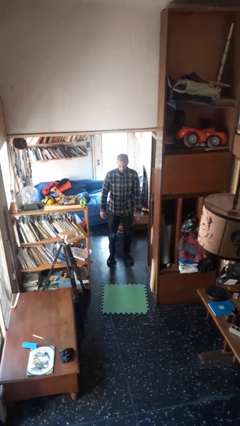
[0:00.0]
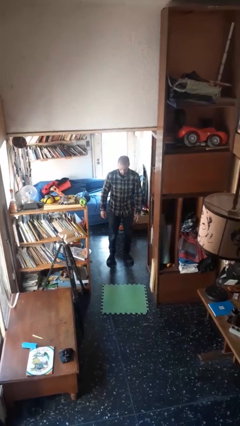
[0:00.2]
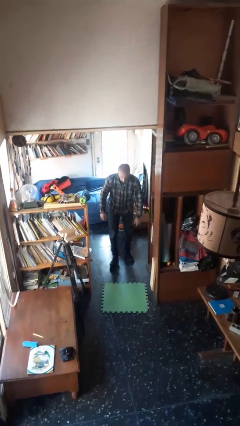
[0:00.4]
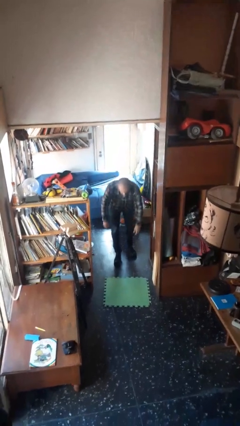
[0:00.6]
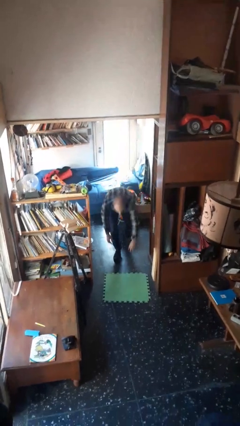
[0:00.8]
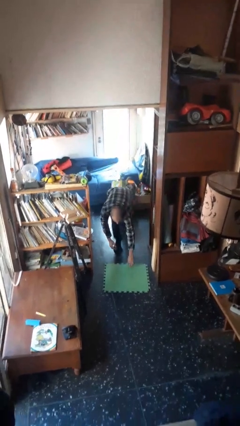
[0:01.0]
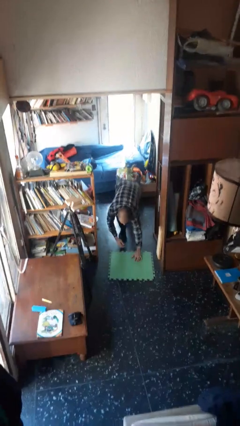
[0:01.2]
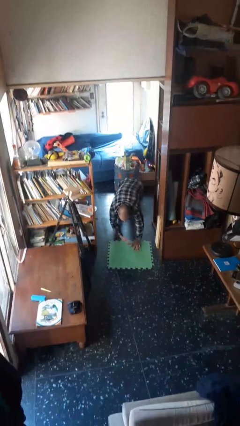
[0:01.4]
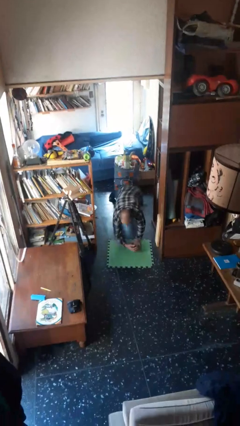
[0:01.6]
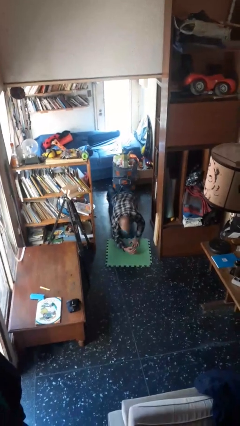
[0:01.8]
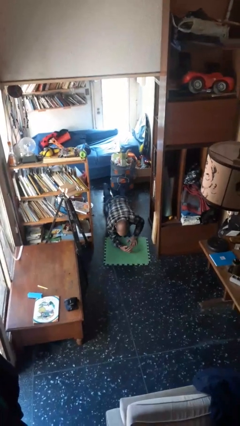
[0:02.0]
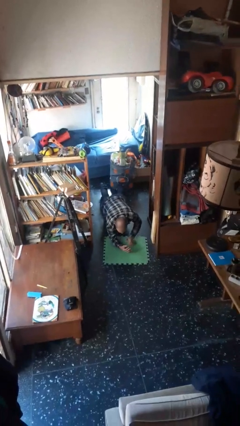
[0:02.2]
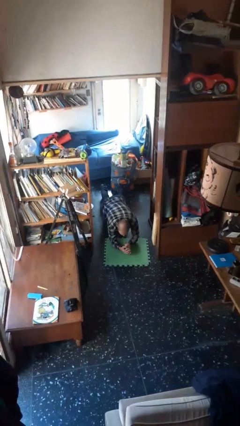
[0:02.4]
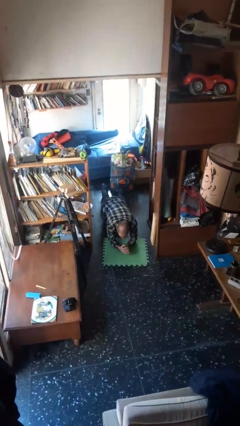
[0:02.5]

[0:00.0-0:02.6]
person exercises with plank

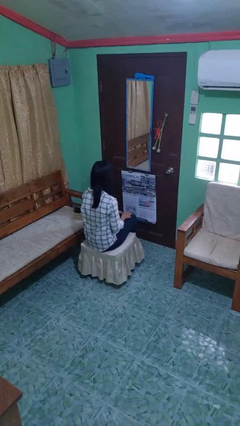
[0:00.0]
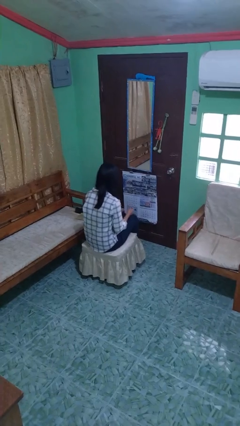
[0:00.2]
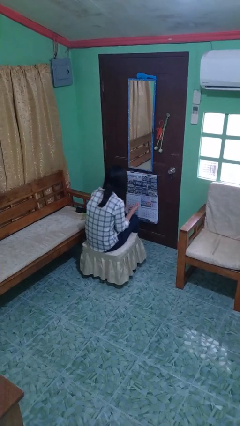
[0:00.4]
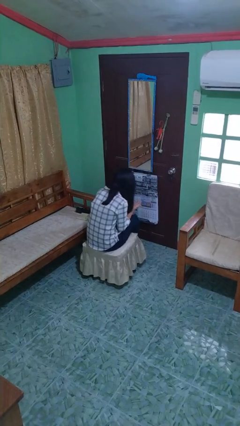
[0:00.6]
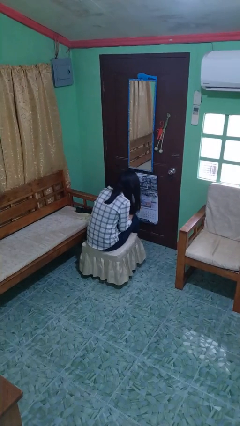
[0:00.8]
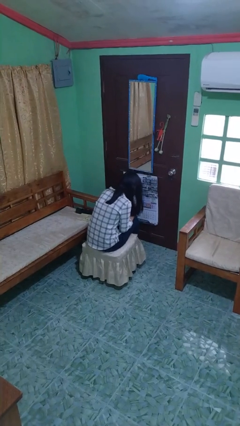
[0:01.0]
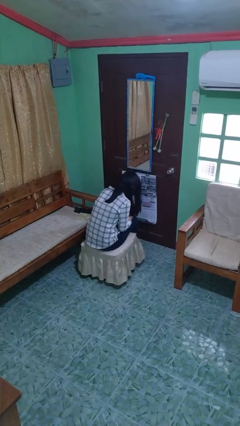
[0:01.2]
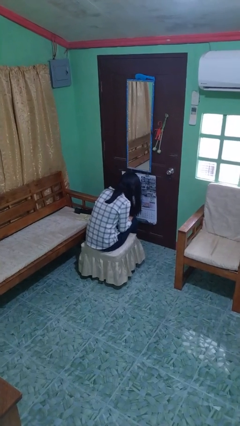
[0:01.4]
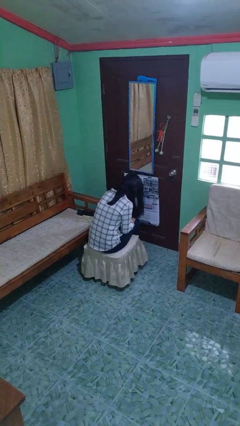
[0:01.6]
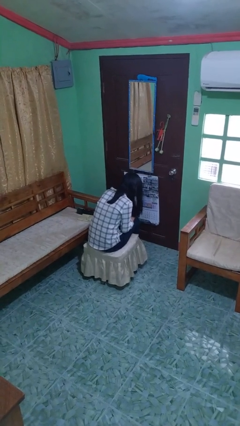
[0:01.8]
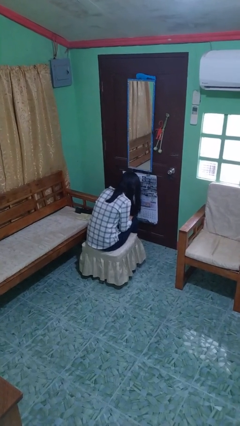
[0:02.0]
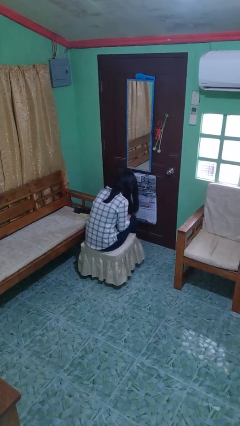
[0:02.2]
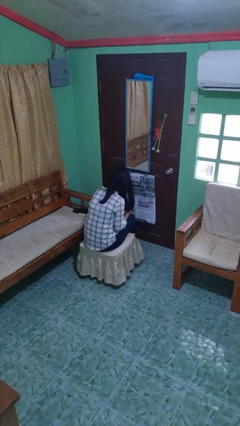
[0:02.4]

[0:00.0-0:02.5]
person looks at hands in lap

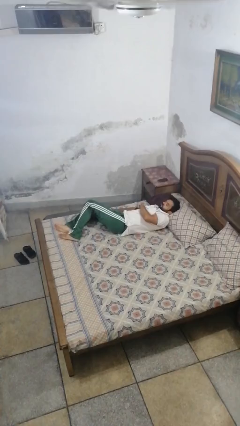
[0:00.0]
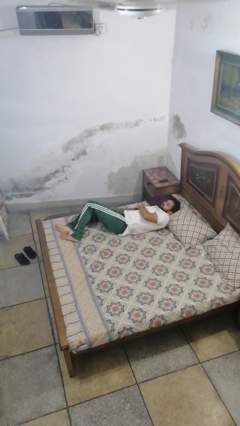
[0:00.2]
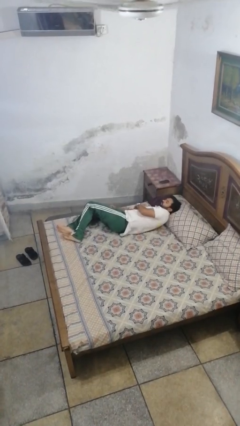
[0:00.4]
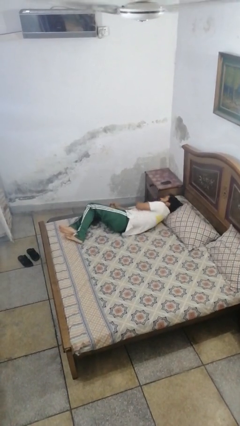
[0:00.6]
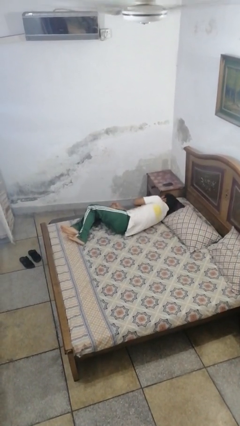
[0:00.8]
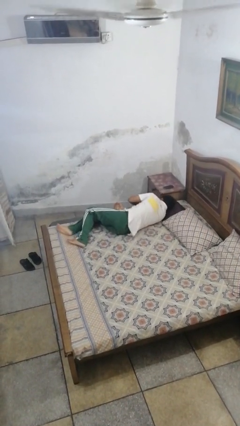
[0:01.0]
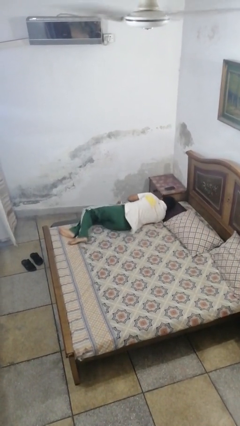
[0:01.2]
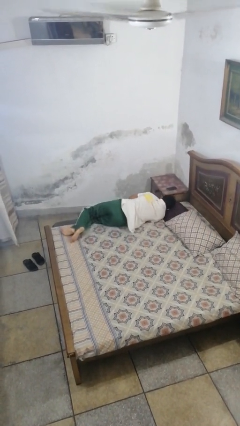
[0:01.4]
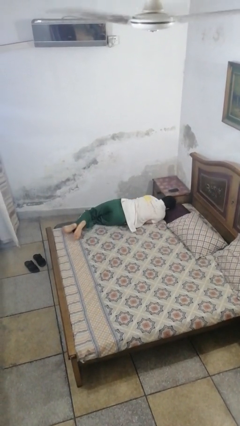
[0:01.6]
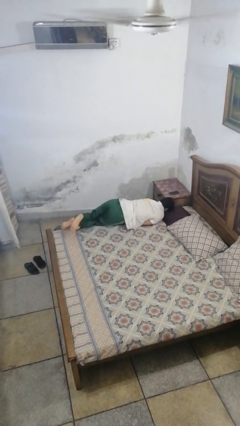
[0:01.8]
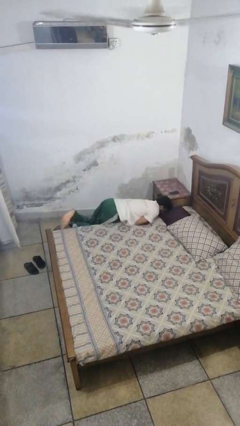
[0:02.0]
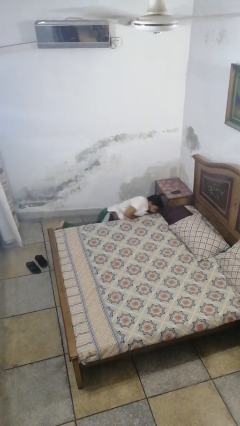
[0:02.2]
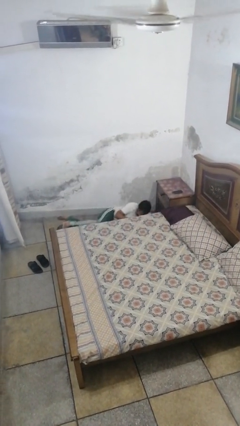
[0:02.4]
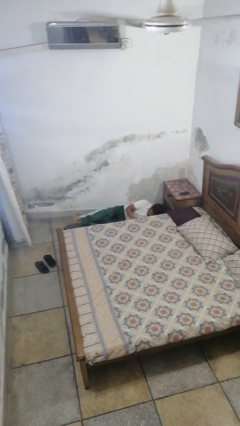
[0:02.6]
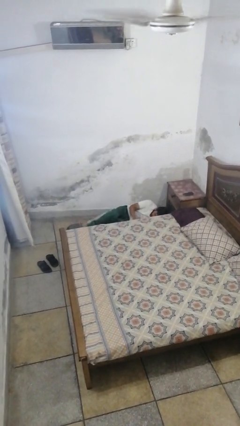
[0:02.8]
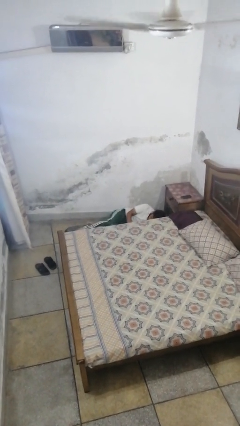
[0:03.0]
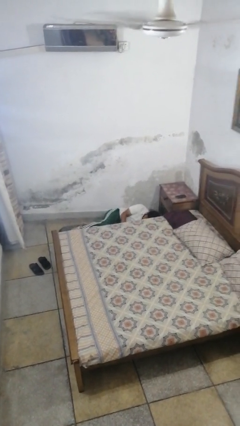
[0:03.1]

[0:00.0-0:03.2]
person falls from bed

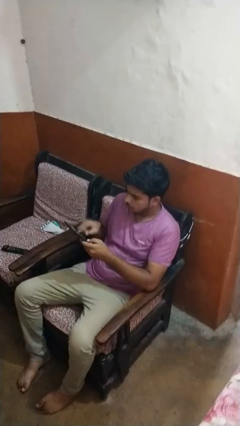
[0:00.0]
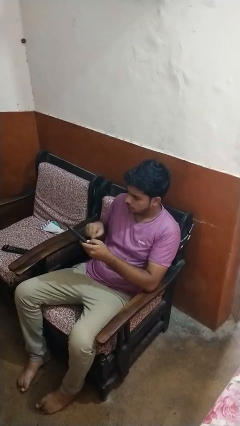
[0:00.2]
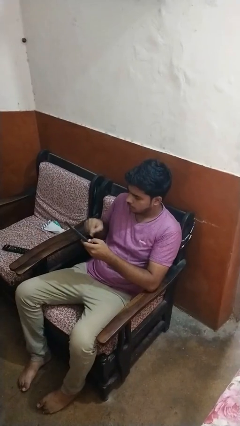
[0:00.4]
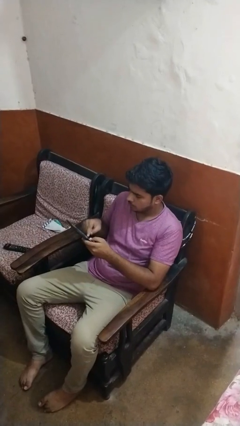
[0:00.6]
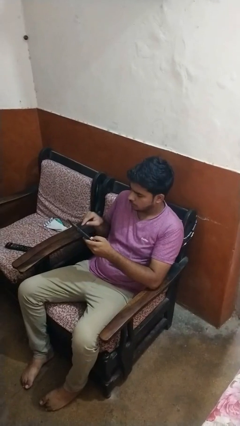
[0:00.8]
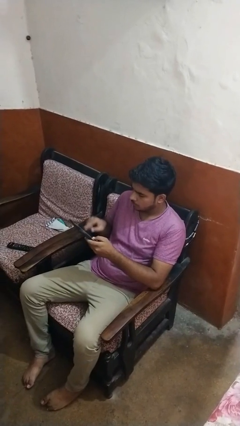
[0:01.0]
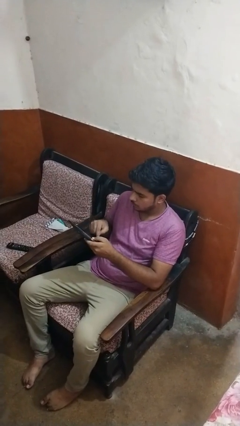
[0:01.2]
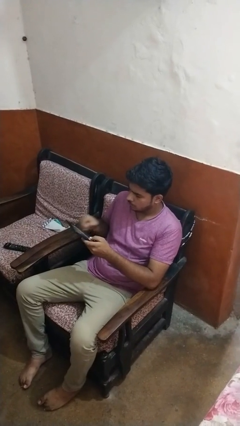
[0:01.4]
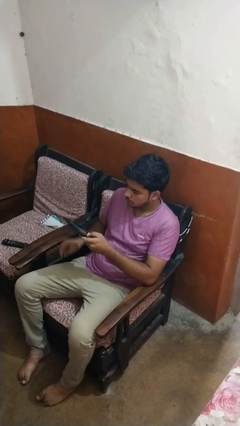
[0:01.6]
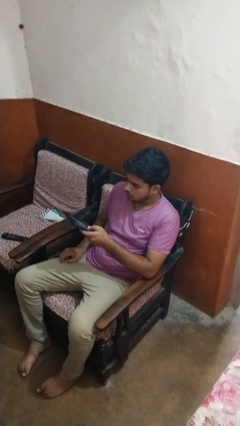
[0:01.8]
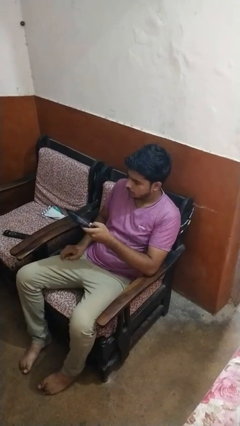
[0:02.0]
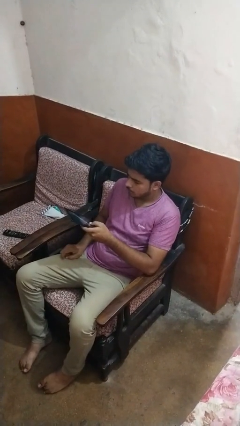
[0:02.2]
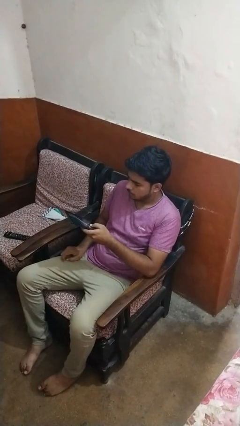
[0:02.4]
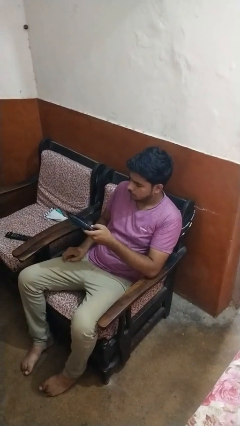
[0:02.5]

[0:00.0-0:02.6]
person interacts with tablet

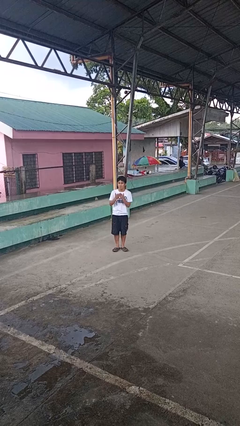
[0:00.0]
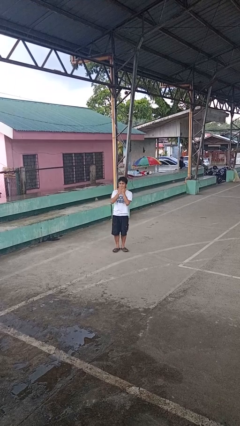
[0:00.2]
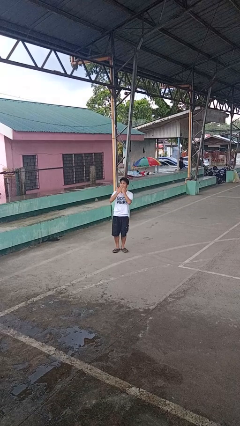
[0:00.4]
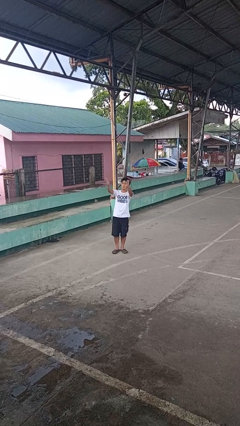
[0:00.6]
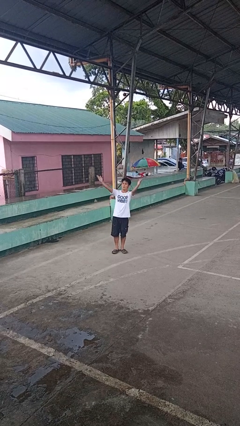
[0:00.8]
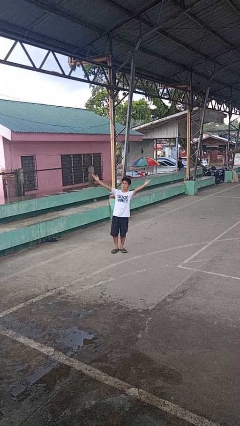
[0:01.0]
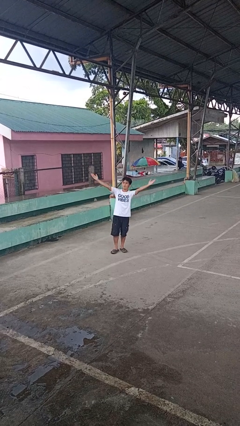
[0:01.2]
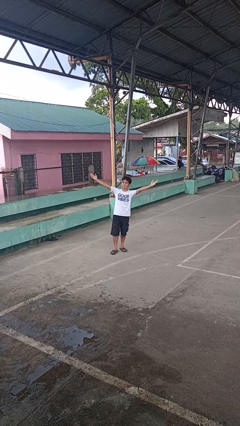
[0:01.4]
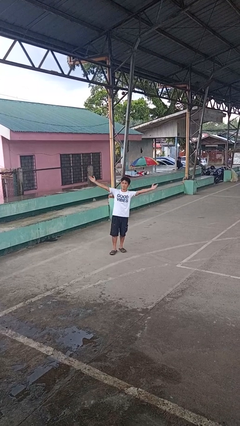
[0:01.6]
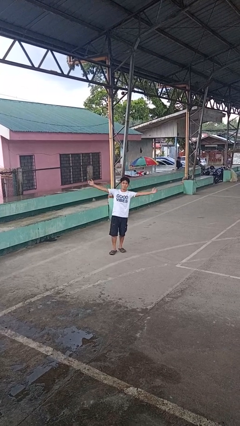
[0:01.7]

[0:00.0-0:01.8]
person gestures blow kiss

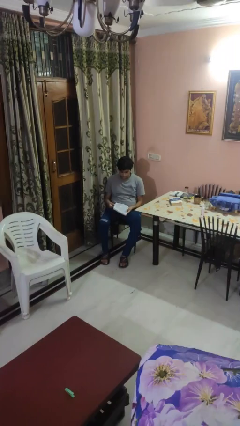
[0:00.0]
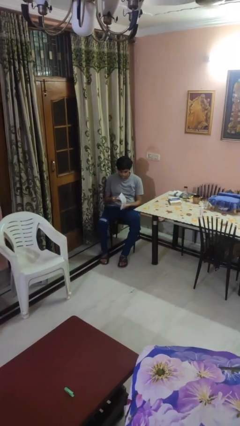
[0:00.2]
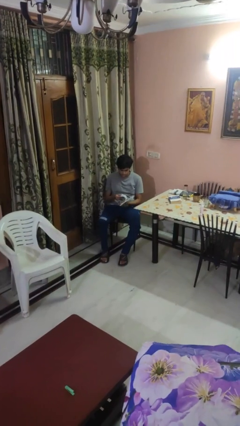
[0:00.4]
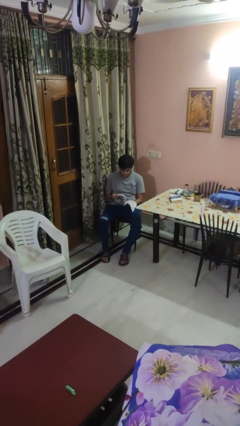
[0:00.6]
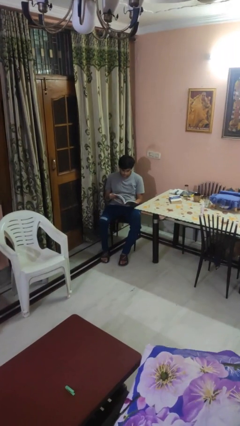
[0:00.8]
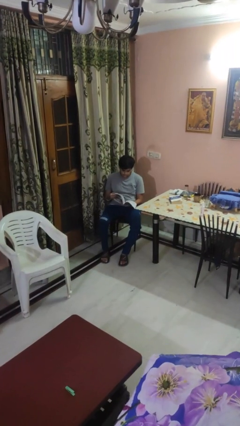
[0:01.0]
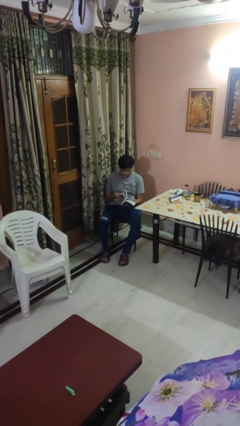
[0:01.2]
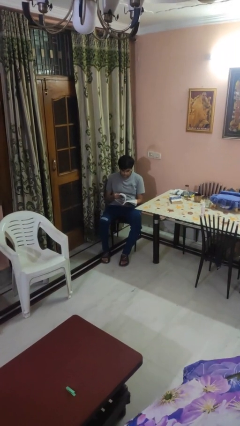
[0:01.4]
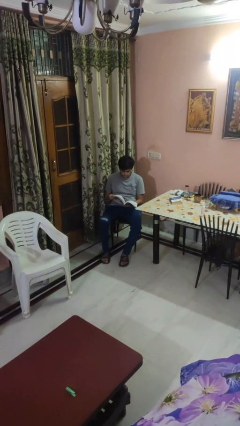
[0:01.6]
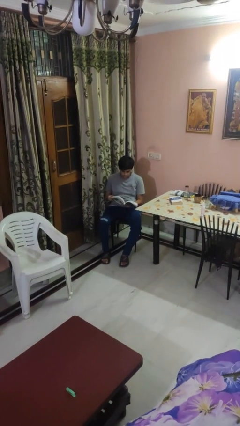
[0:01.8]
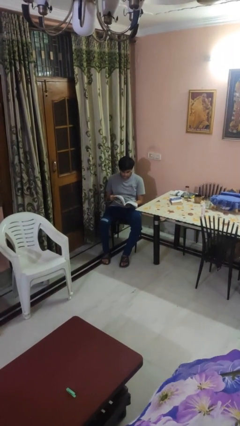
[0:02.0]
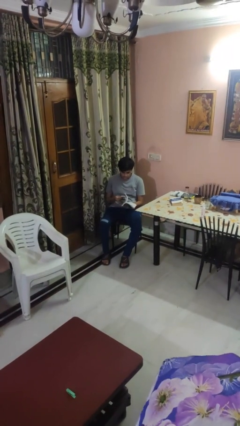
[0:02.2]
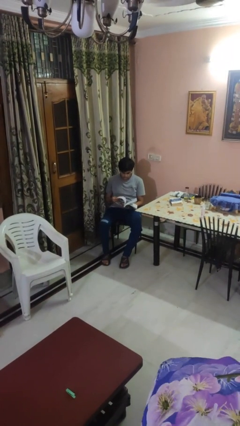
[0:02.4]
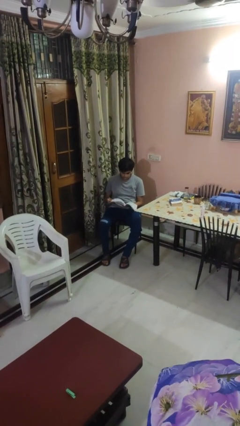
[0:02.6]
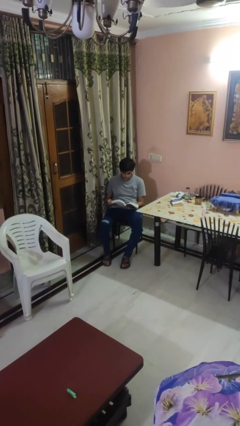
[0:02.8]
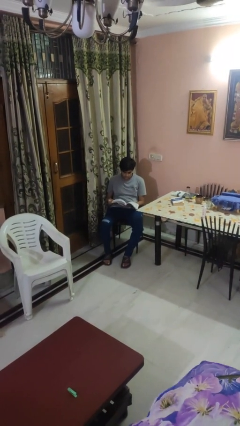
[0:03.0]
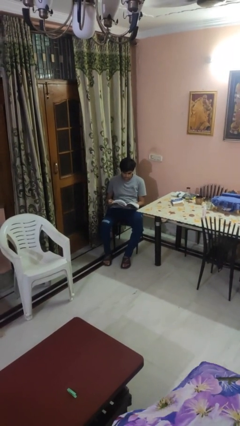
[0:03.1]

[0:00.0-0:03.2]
person reads magazine

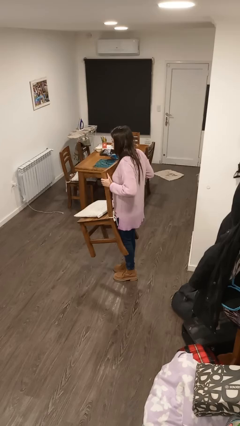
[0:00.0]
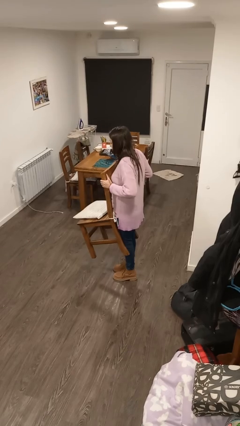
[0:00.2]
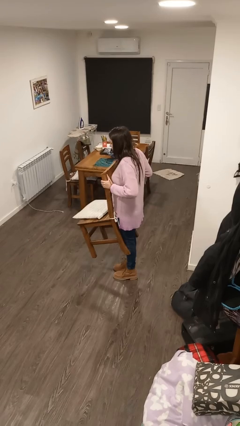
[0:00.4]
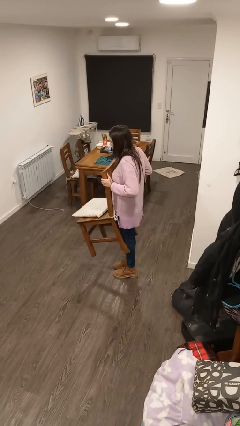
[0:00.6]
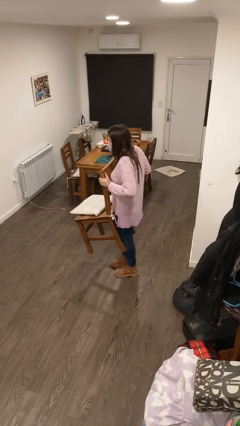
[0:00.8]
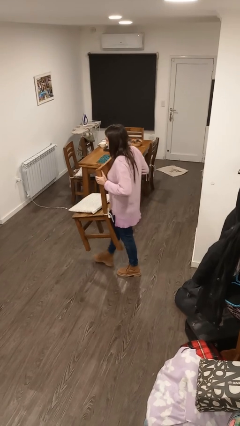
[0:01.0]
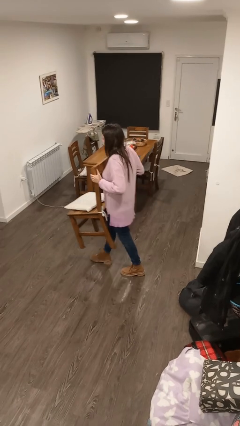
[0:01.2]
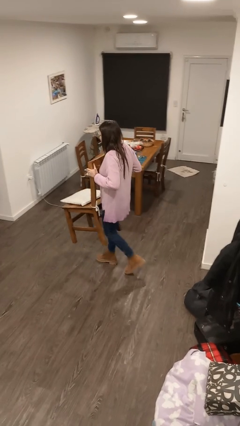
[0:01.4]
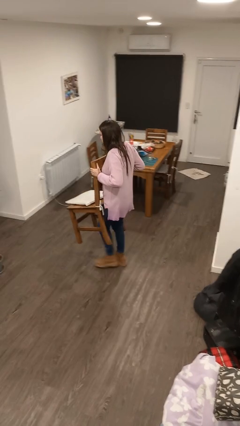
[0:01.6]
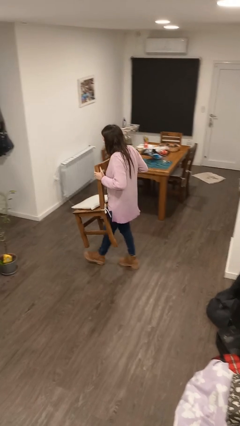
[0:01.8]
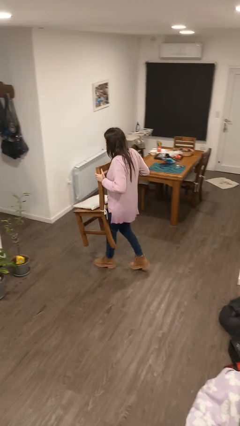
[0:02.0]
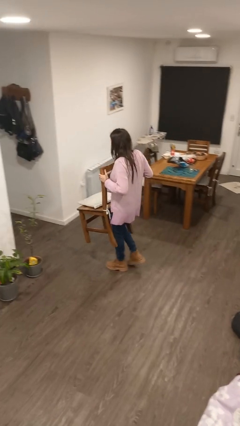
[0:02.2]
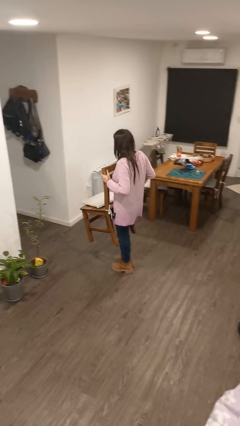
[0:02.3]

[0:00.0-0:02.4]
person carries furniture
